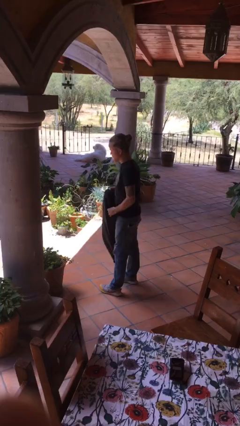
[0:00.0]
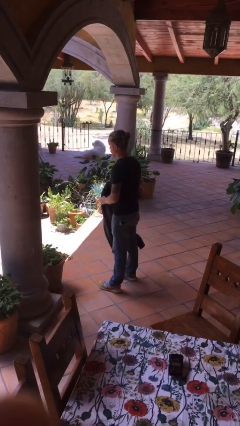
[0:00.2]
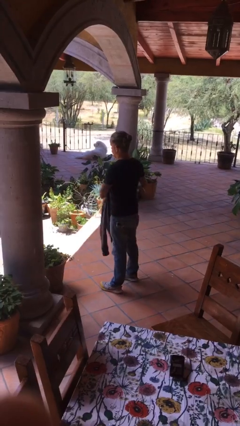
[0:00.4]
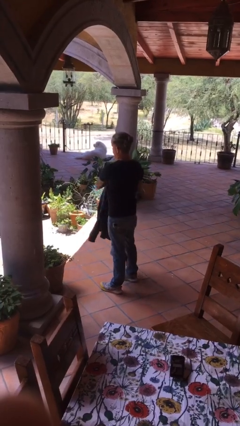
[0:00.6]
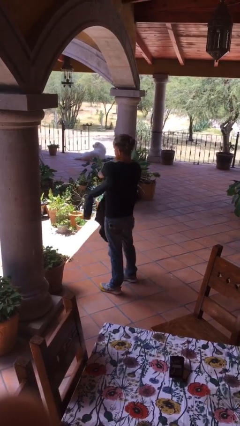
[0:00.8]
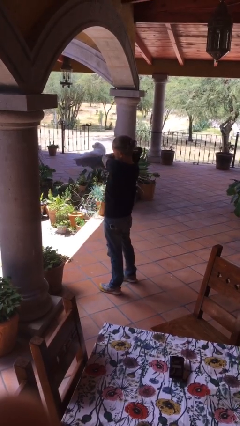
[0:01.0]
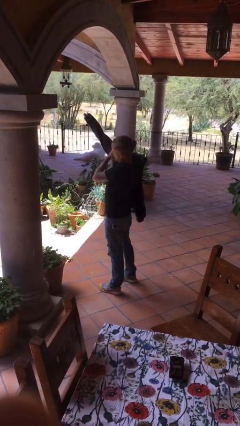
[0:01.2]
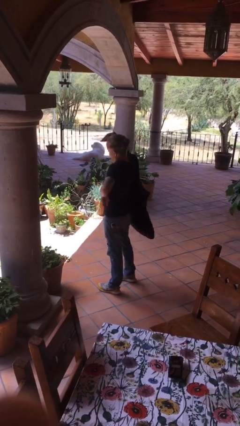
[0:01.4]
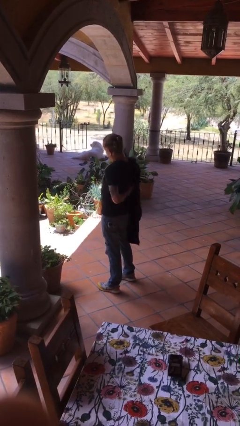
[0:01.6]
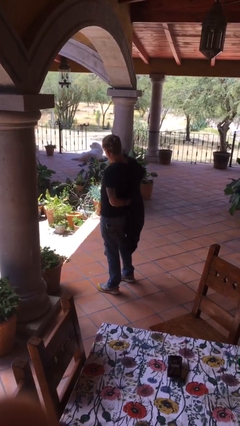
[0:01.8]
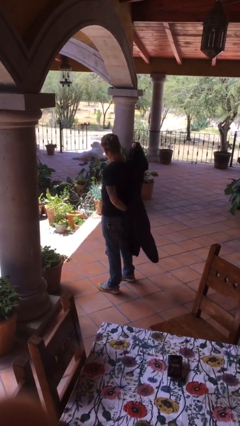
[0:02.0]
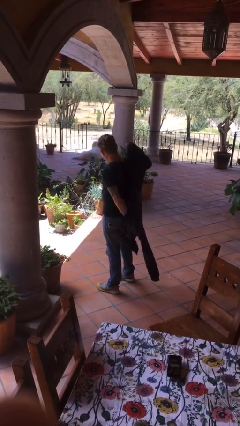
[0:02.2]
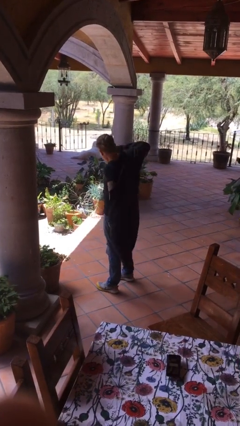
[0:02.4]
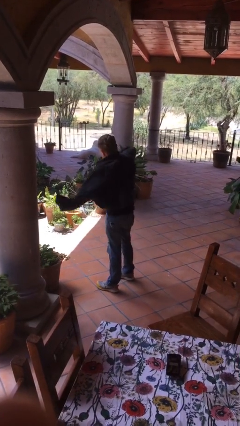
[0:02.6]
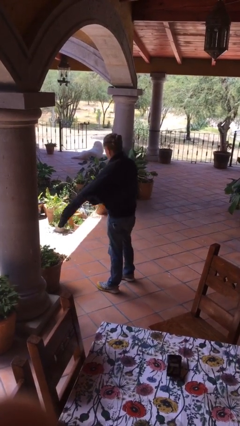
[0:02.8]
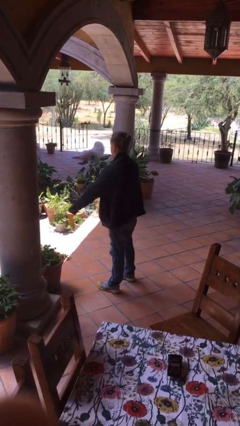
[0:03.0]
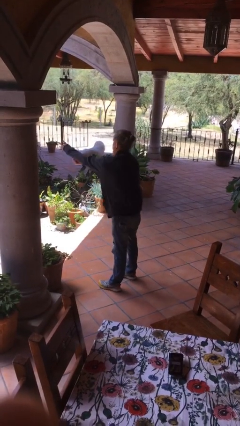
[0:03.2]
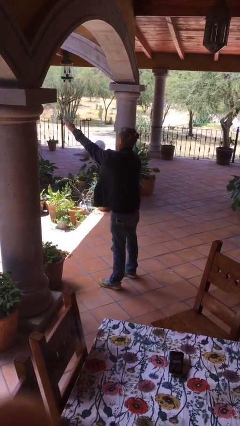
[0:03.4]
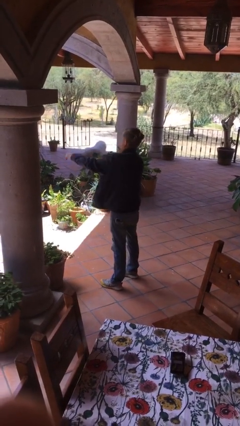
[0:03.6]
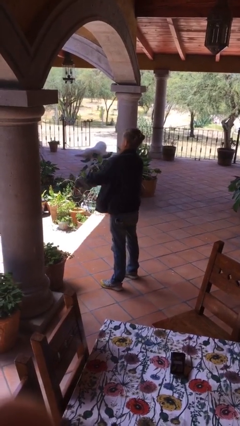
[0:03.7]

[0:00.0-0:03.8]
person puts on jacket

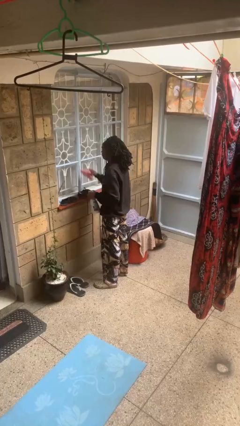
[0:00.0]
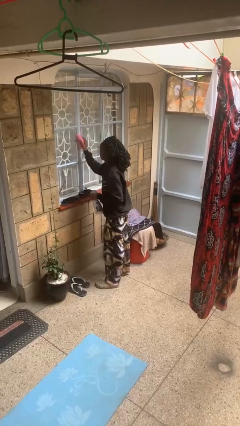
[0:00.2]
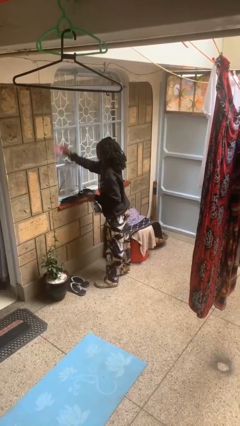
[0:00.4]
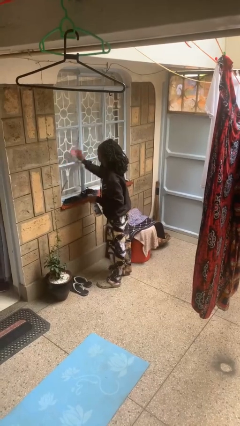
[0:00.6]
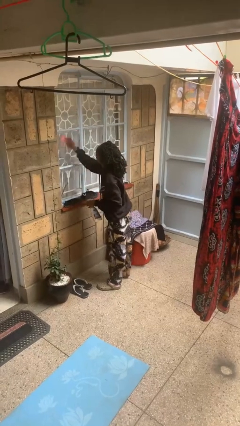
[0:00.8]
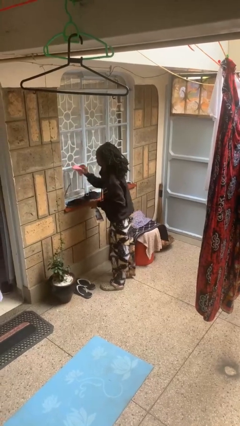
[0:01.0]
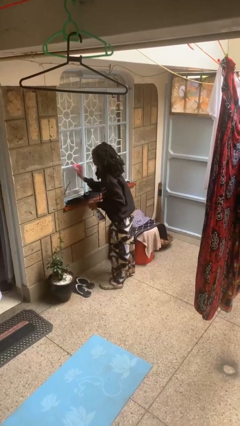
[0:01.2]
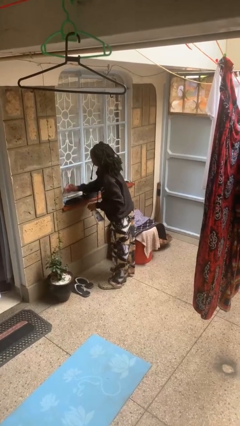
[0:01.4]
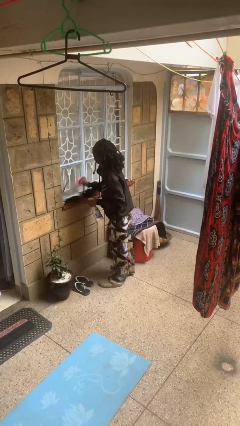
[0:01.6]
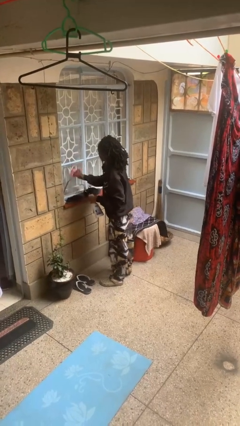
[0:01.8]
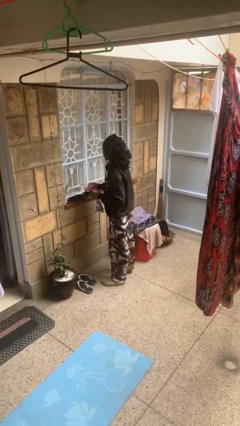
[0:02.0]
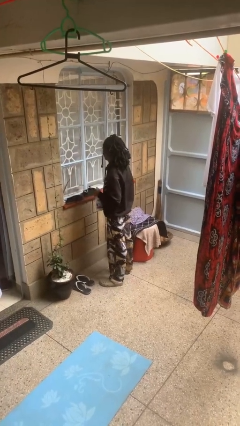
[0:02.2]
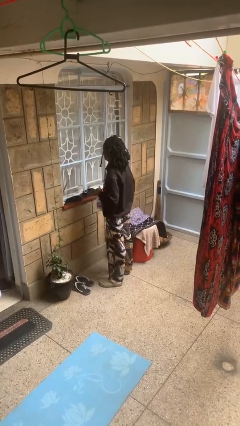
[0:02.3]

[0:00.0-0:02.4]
person washes window

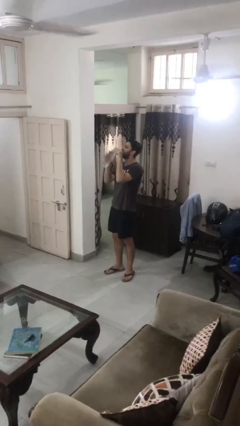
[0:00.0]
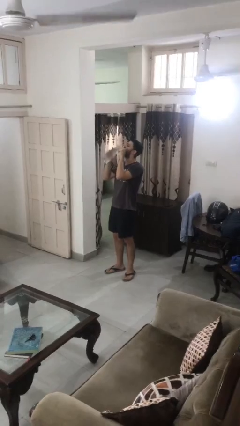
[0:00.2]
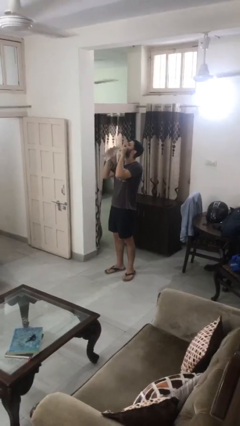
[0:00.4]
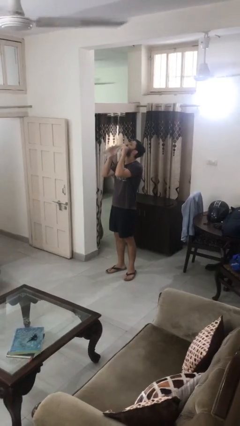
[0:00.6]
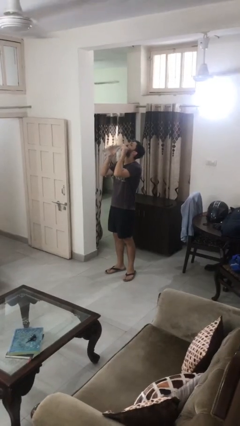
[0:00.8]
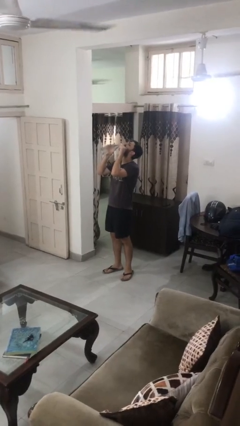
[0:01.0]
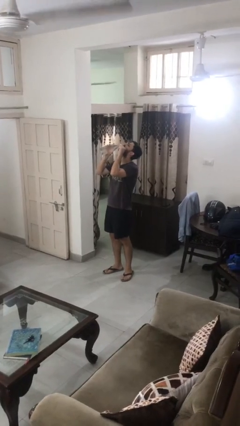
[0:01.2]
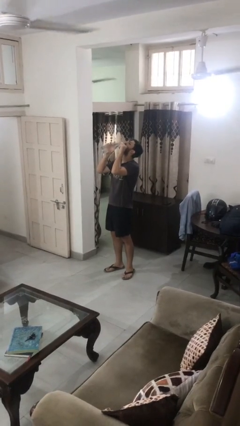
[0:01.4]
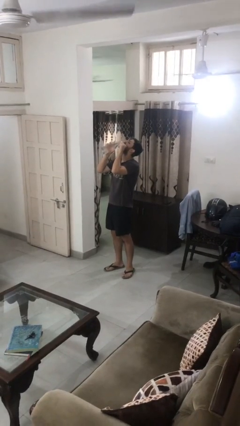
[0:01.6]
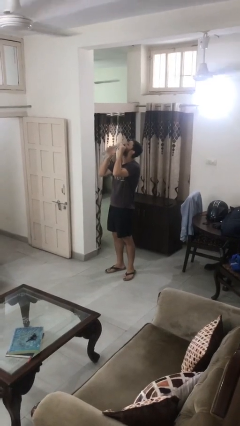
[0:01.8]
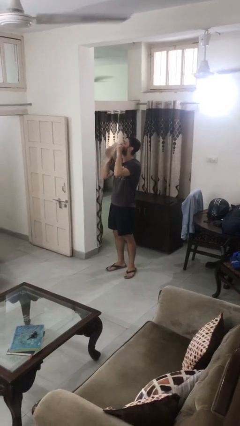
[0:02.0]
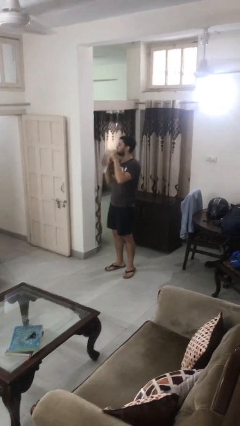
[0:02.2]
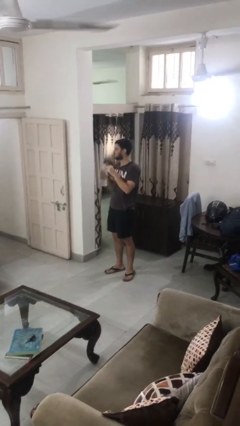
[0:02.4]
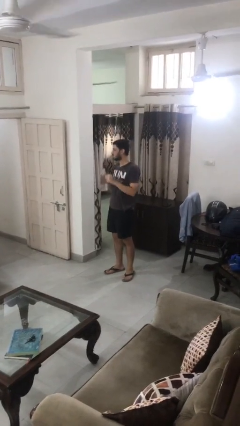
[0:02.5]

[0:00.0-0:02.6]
person drinks from bottle

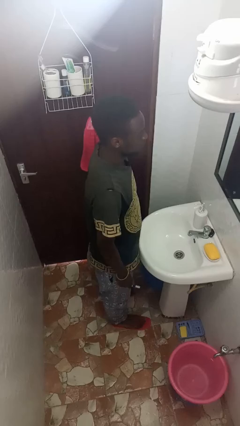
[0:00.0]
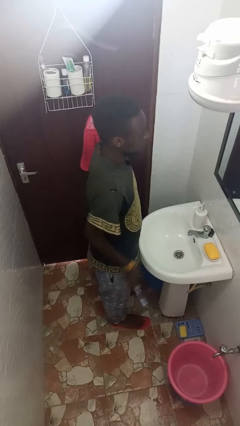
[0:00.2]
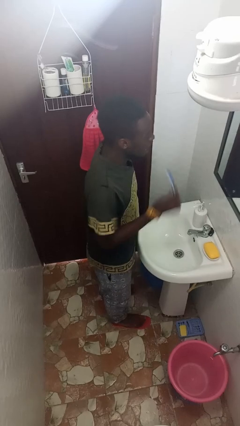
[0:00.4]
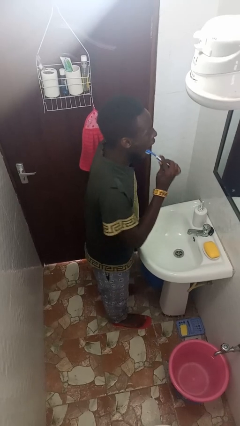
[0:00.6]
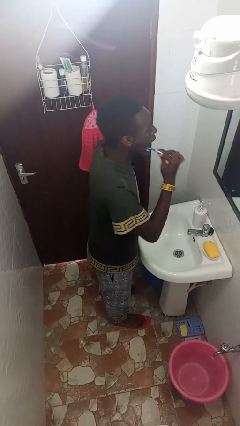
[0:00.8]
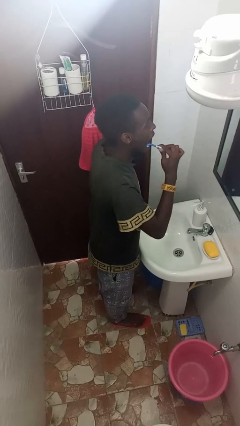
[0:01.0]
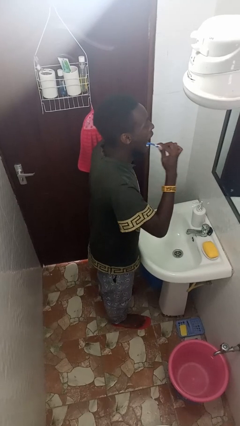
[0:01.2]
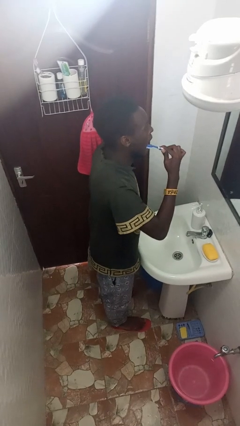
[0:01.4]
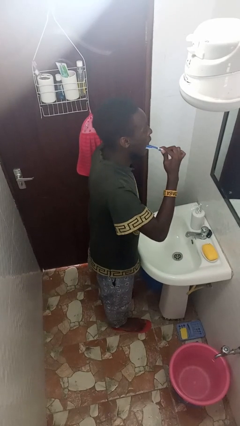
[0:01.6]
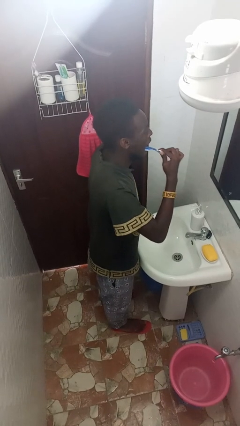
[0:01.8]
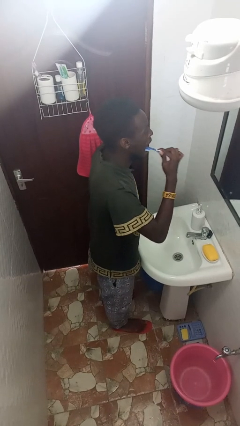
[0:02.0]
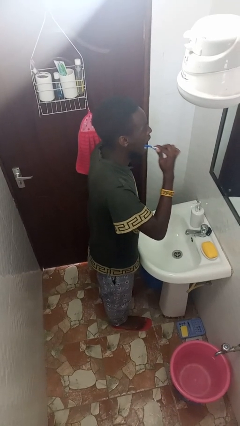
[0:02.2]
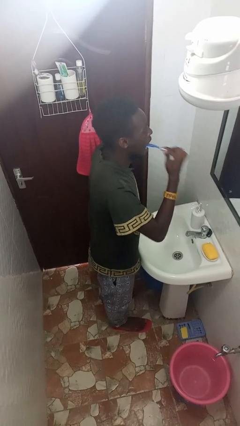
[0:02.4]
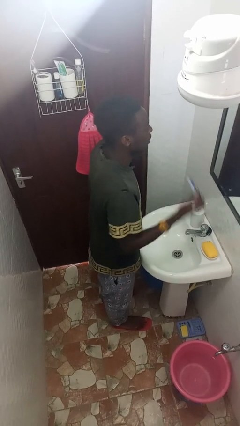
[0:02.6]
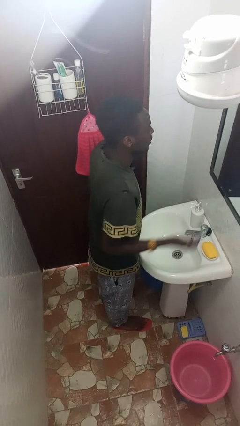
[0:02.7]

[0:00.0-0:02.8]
person brushes teeth

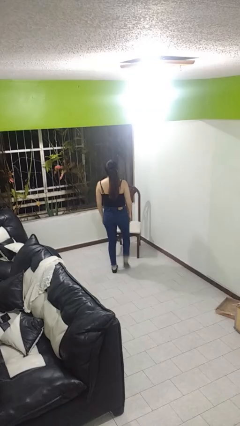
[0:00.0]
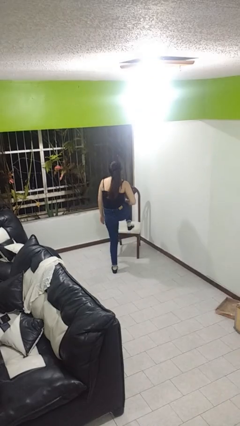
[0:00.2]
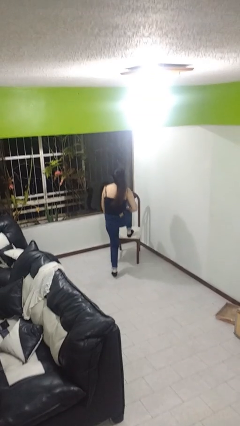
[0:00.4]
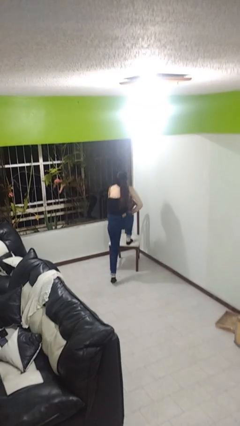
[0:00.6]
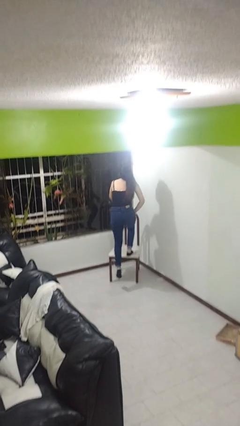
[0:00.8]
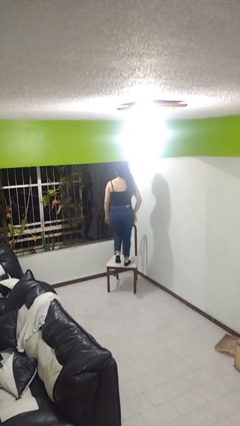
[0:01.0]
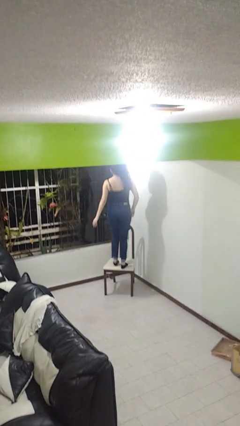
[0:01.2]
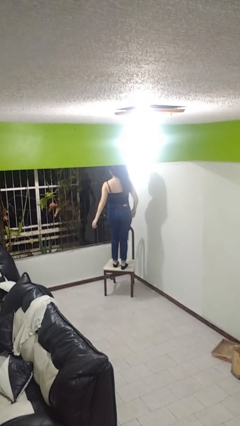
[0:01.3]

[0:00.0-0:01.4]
person climbs on chair

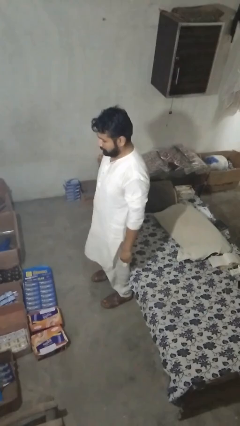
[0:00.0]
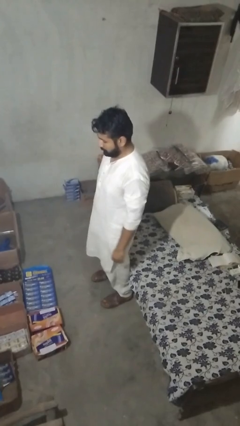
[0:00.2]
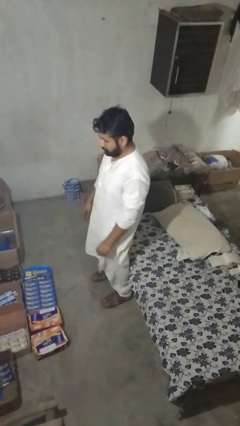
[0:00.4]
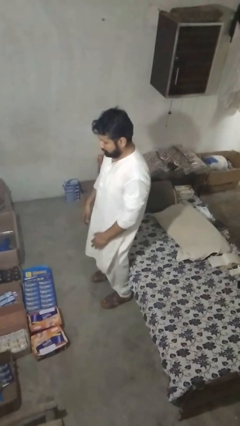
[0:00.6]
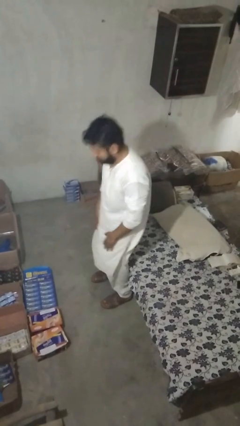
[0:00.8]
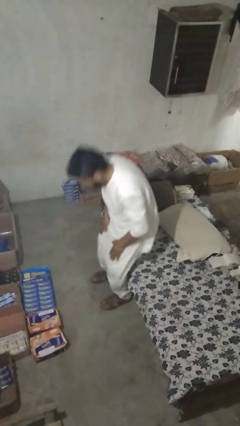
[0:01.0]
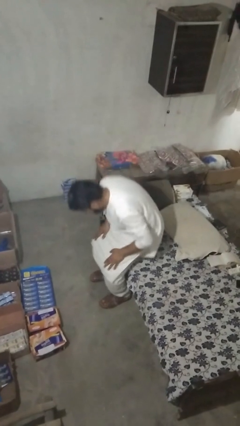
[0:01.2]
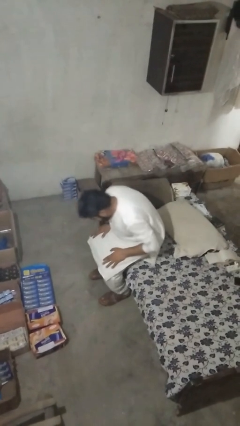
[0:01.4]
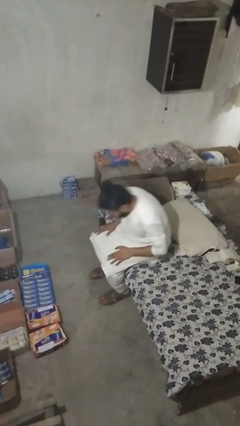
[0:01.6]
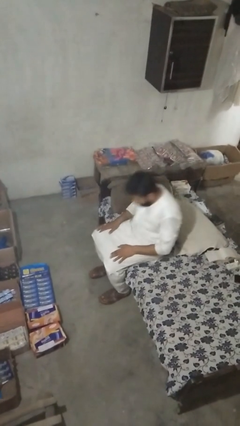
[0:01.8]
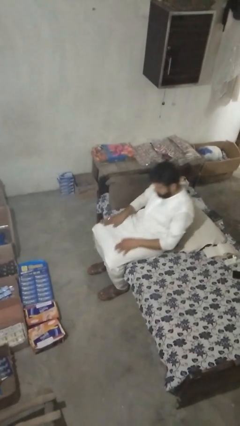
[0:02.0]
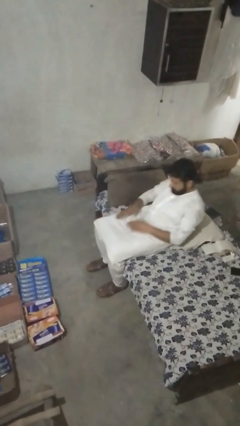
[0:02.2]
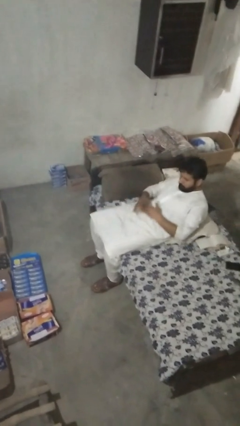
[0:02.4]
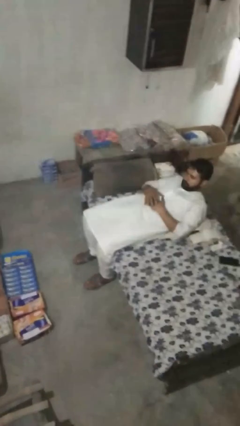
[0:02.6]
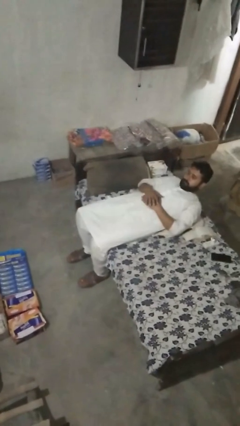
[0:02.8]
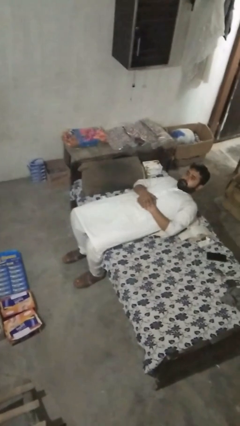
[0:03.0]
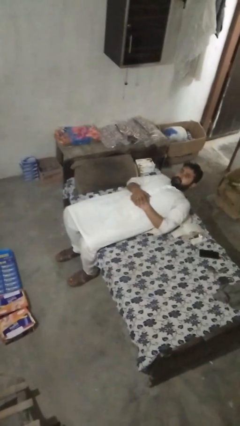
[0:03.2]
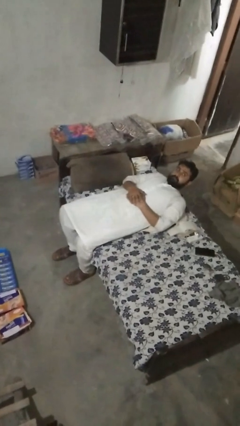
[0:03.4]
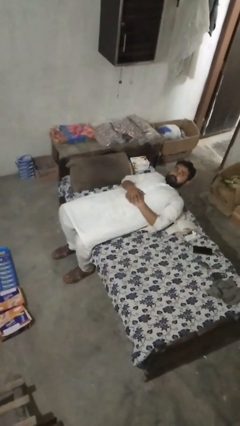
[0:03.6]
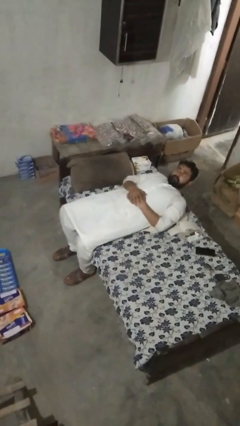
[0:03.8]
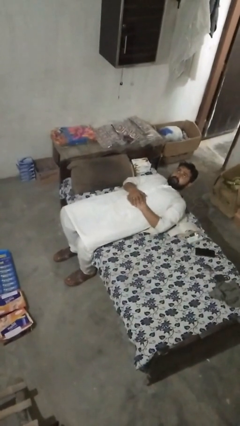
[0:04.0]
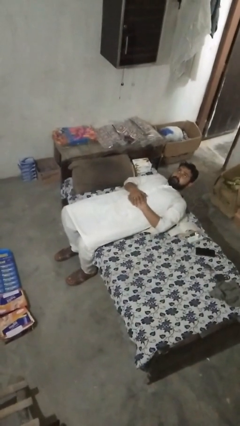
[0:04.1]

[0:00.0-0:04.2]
person lies down on couch
